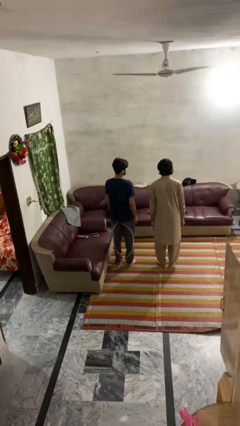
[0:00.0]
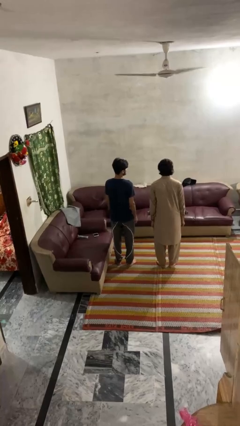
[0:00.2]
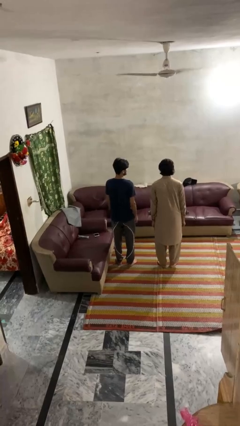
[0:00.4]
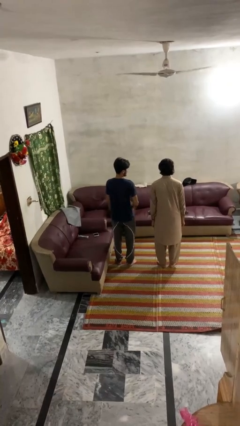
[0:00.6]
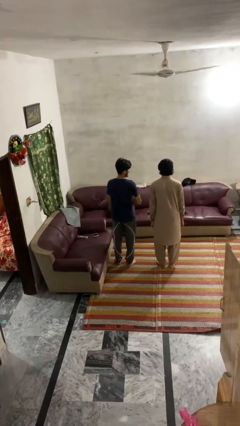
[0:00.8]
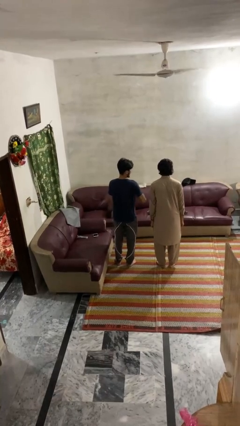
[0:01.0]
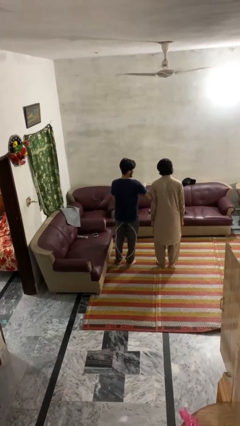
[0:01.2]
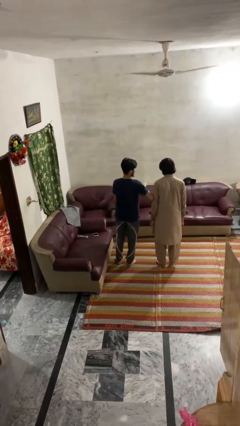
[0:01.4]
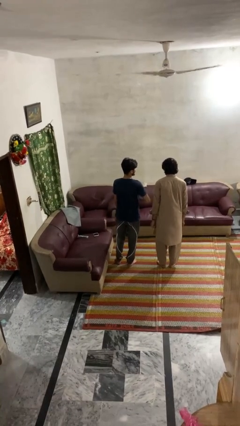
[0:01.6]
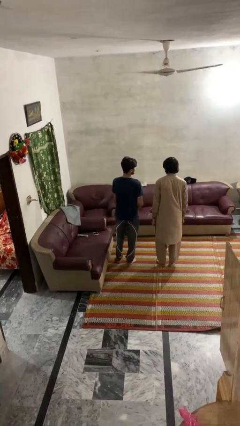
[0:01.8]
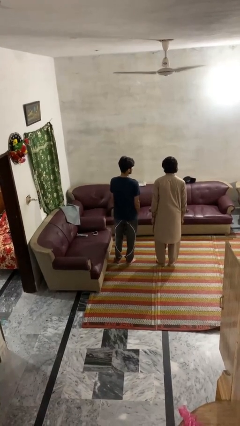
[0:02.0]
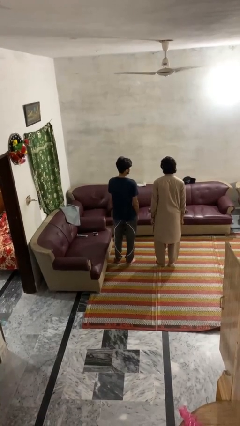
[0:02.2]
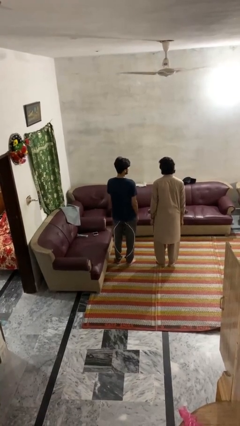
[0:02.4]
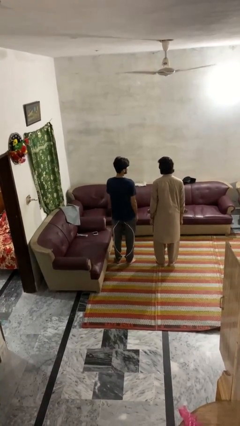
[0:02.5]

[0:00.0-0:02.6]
person nudges person with elbow

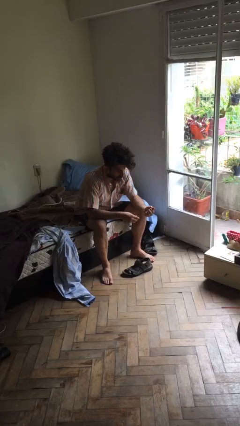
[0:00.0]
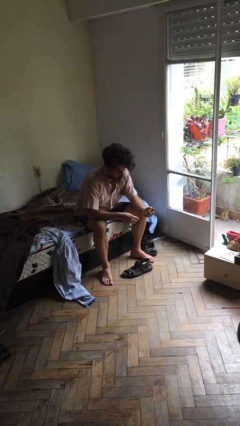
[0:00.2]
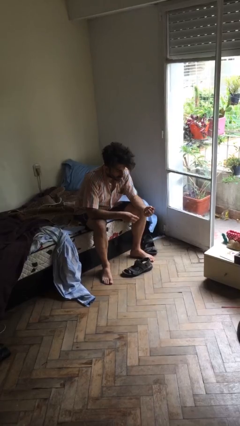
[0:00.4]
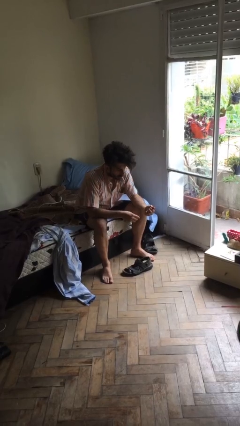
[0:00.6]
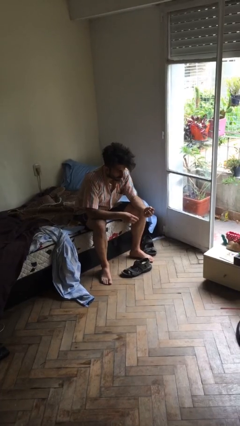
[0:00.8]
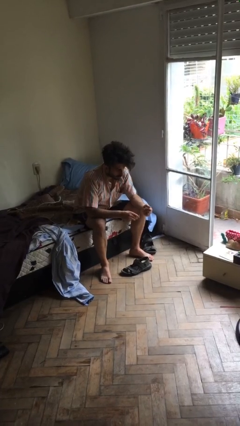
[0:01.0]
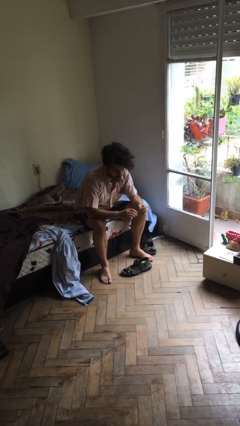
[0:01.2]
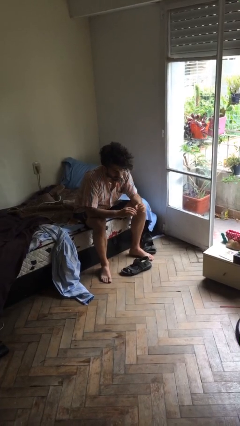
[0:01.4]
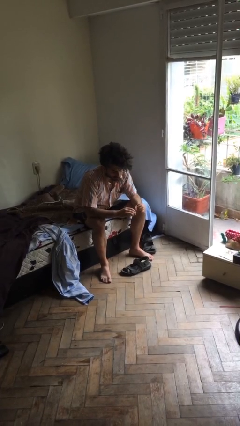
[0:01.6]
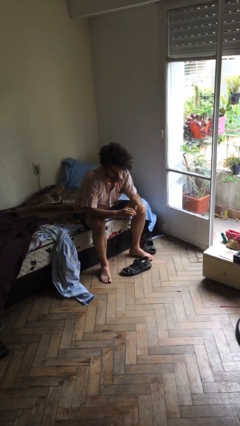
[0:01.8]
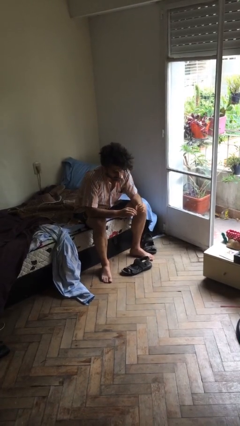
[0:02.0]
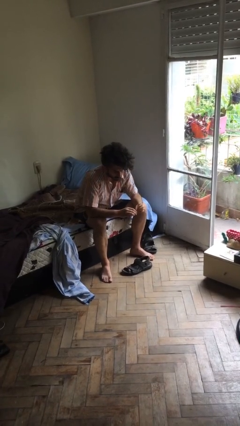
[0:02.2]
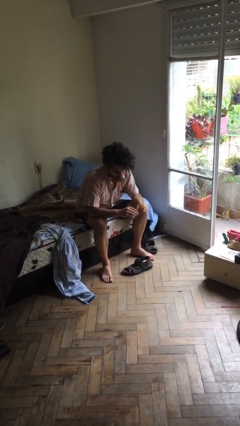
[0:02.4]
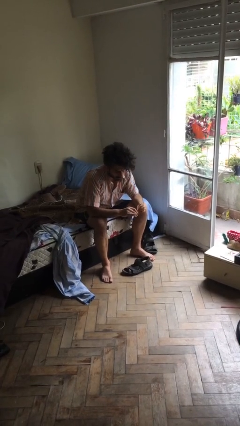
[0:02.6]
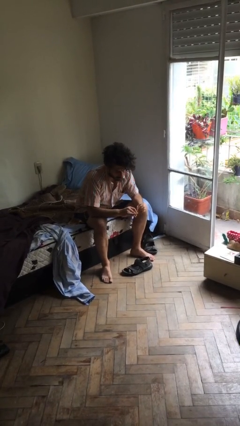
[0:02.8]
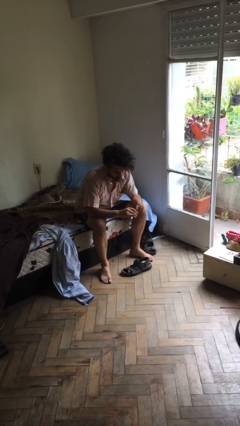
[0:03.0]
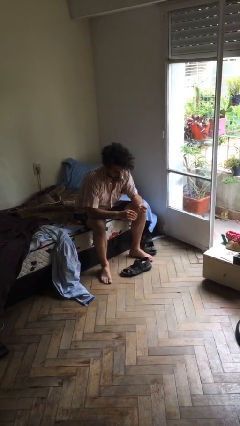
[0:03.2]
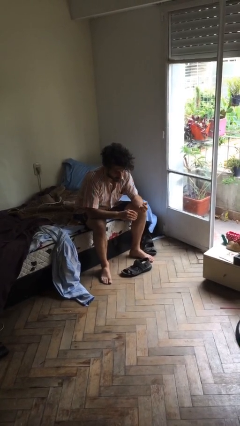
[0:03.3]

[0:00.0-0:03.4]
person clips fingernails

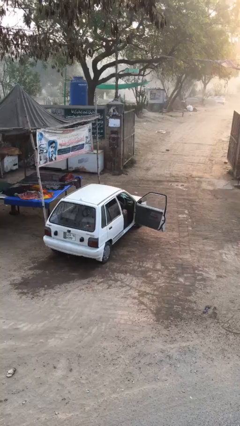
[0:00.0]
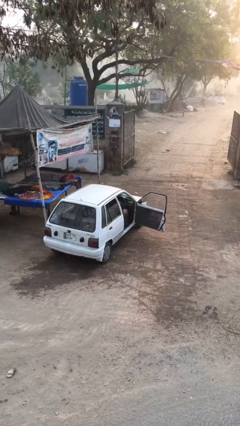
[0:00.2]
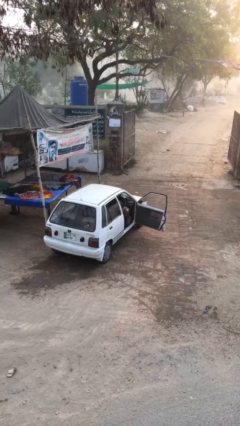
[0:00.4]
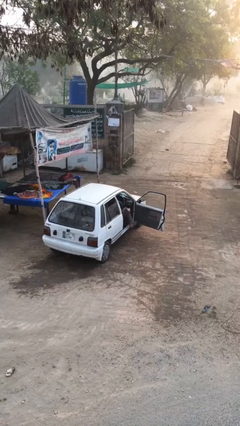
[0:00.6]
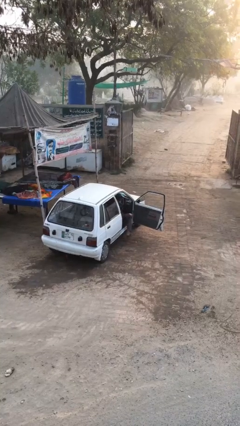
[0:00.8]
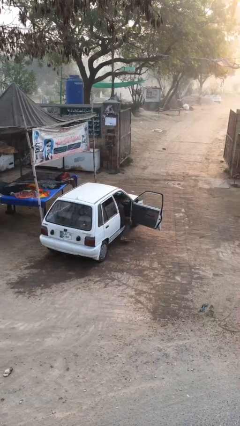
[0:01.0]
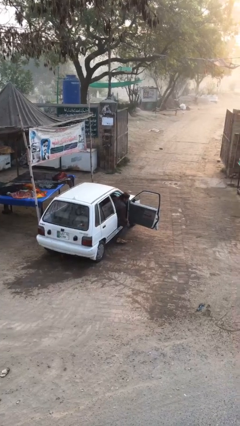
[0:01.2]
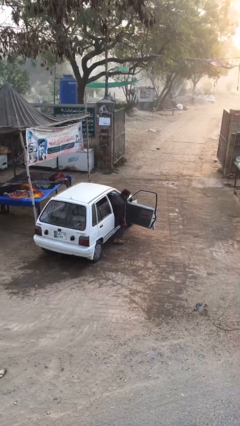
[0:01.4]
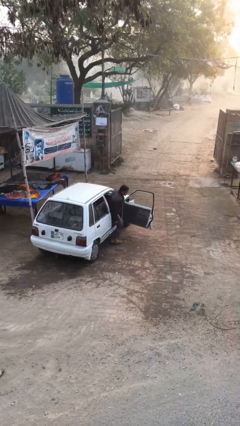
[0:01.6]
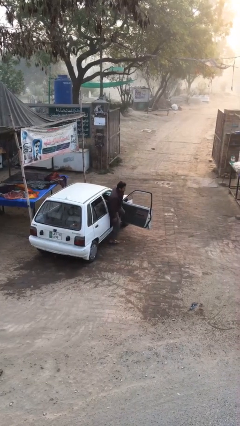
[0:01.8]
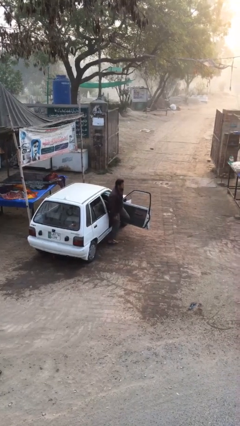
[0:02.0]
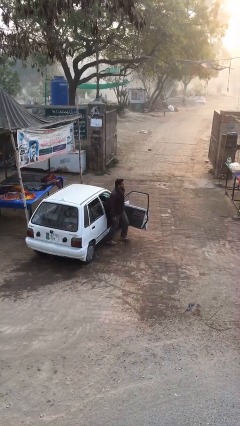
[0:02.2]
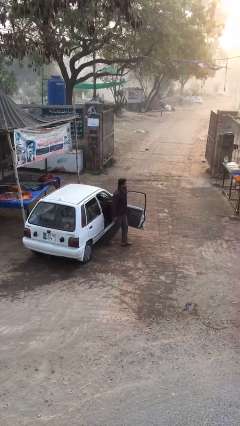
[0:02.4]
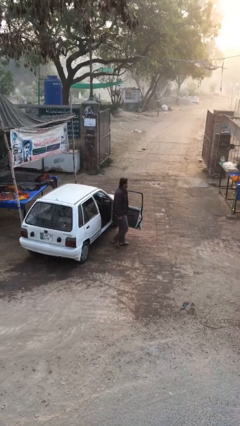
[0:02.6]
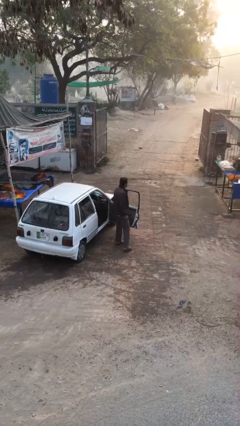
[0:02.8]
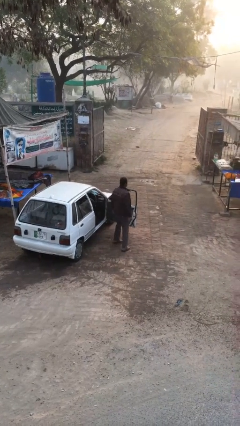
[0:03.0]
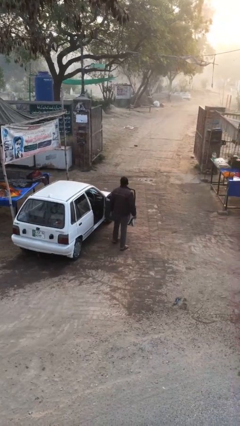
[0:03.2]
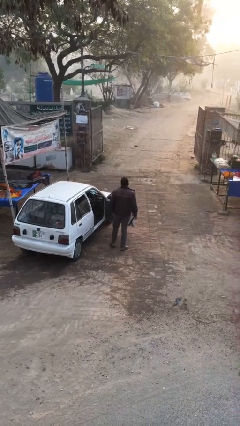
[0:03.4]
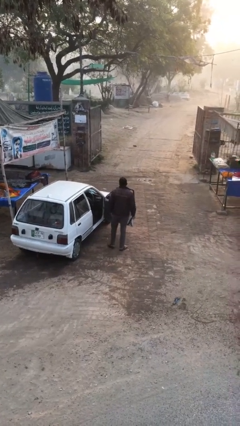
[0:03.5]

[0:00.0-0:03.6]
person exits car

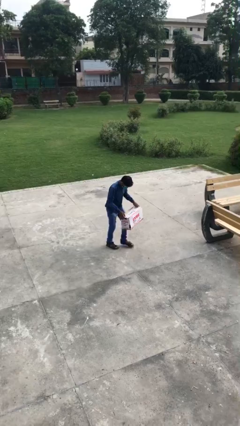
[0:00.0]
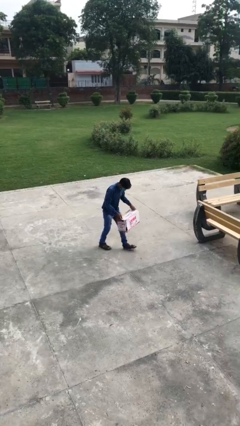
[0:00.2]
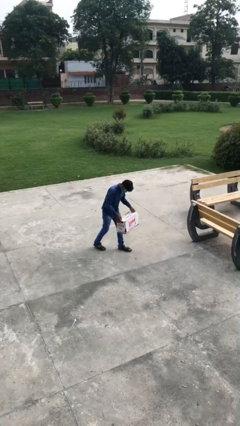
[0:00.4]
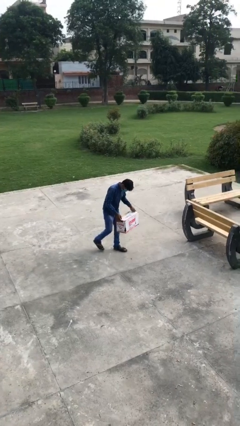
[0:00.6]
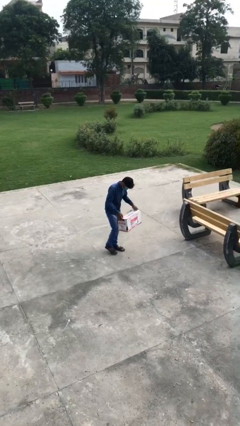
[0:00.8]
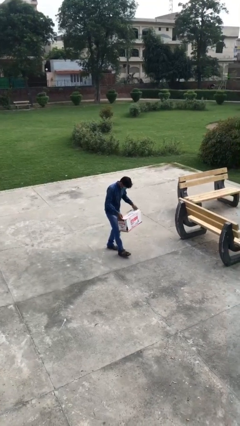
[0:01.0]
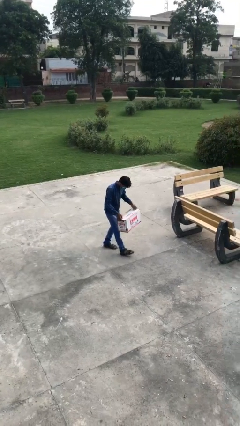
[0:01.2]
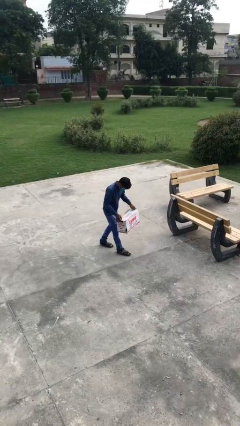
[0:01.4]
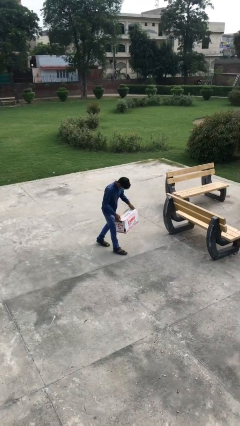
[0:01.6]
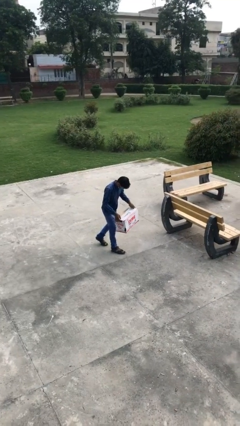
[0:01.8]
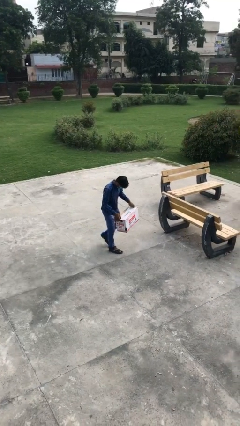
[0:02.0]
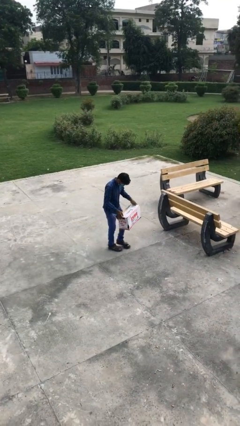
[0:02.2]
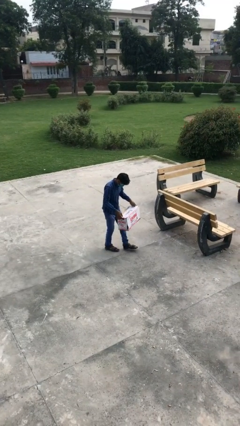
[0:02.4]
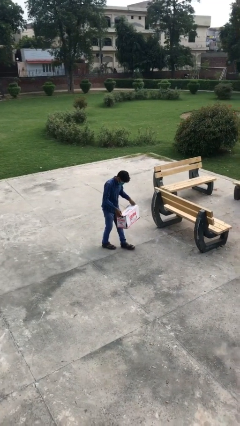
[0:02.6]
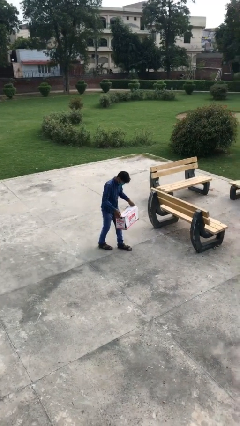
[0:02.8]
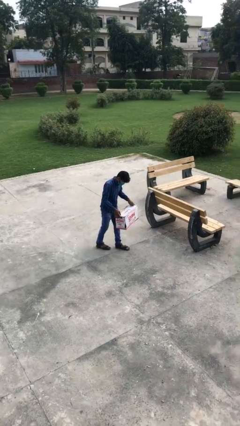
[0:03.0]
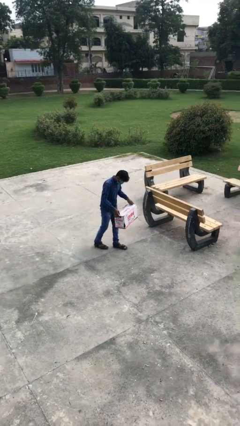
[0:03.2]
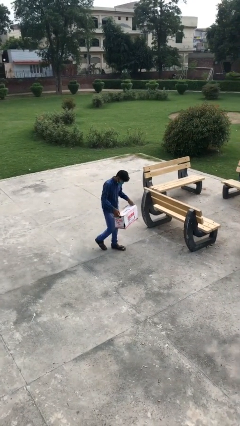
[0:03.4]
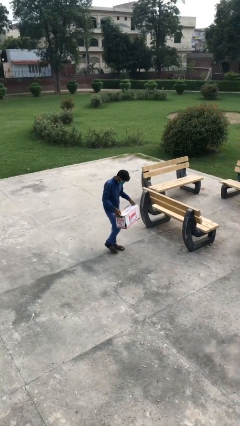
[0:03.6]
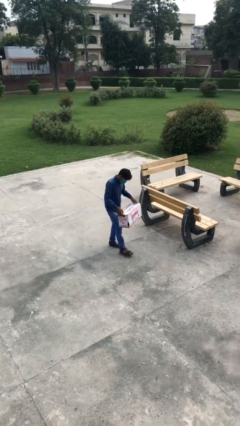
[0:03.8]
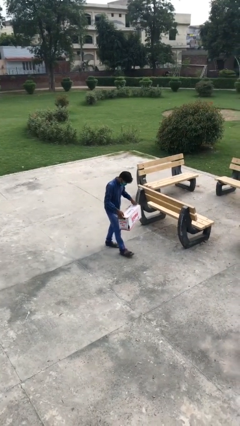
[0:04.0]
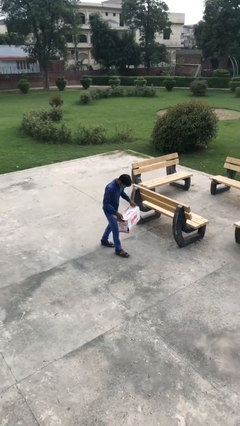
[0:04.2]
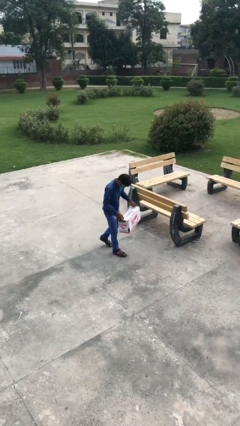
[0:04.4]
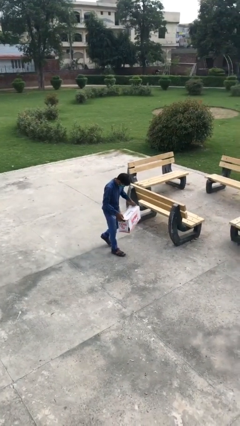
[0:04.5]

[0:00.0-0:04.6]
person carries heavy object

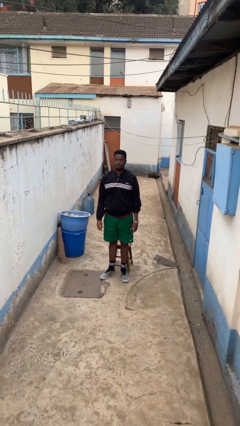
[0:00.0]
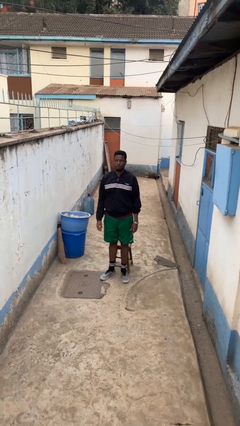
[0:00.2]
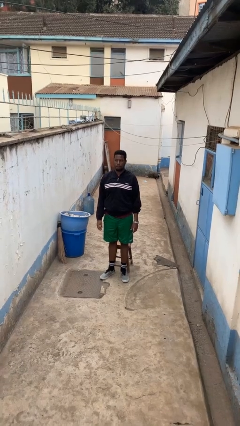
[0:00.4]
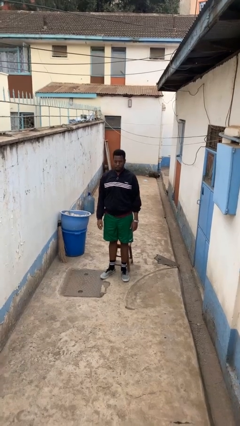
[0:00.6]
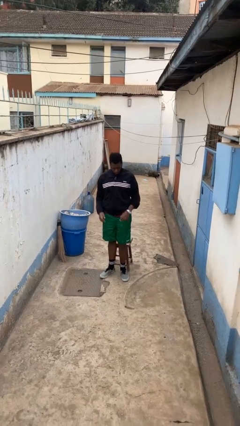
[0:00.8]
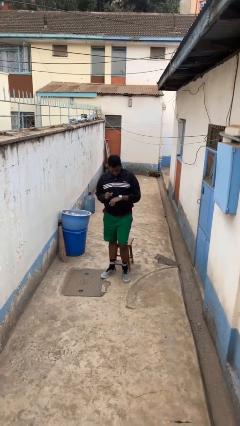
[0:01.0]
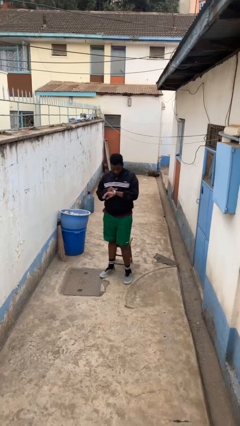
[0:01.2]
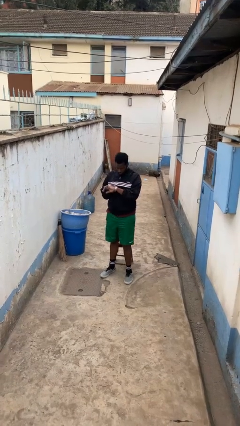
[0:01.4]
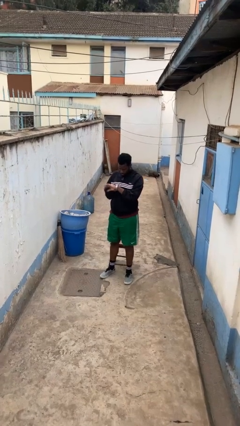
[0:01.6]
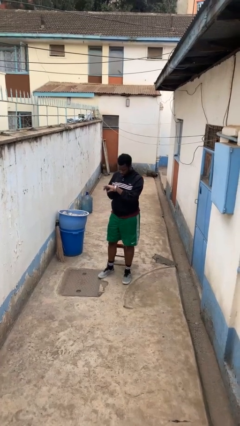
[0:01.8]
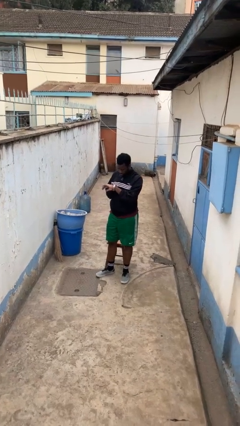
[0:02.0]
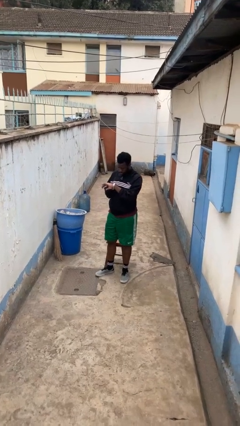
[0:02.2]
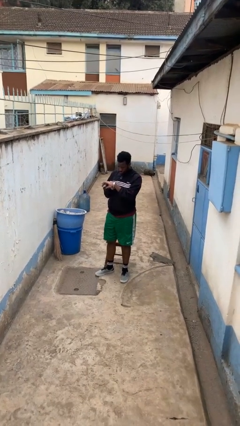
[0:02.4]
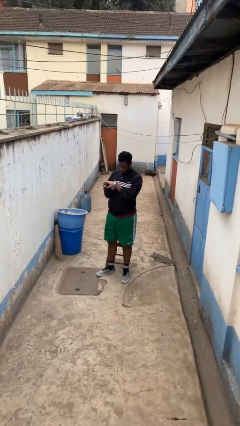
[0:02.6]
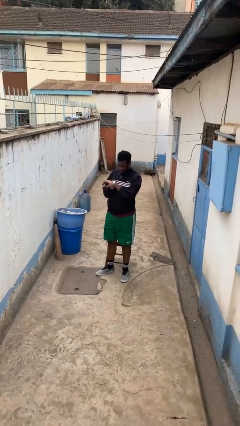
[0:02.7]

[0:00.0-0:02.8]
person looks at wristwatch

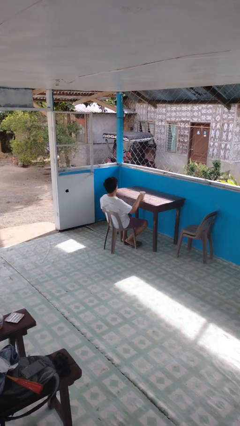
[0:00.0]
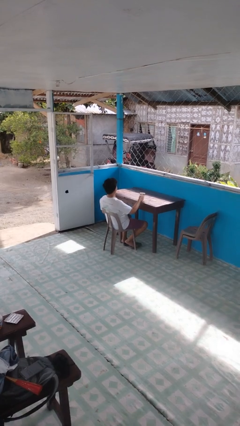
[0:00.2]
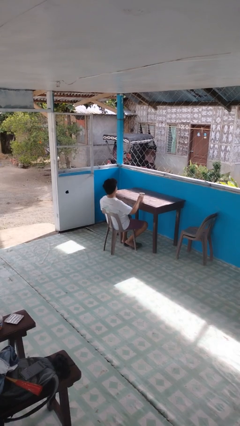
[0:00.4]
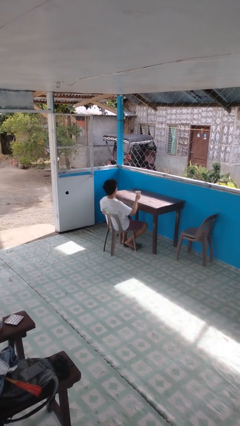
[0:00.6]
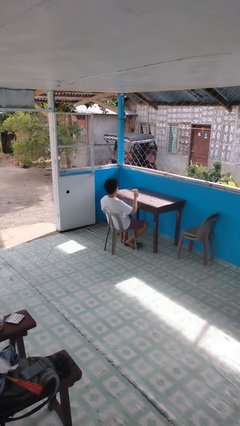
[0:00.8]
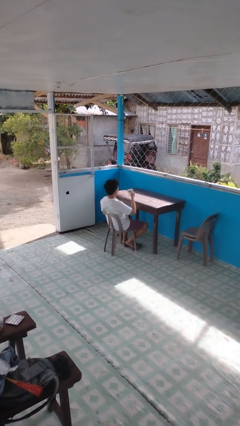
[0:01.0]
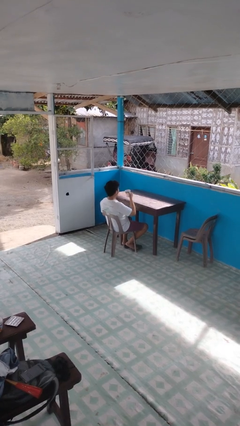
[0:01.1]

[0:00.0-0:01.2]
person picks up object from table
